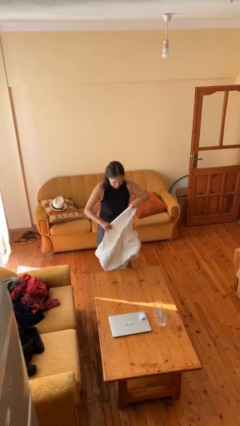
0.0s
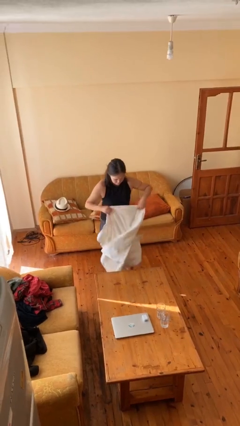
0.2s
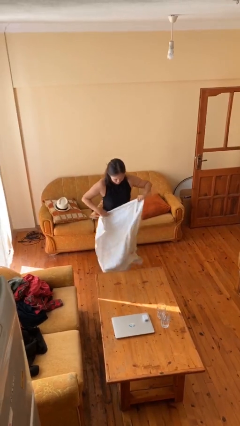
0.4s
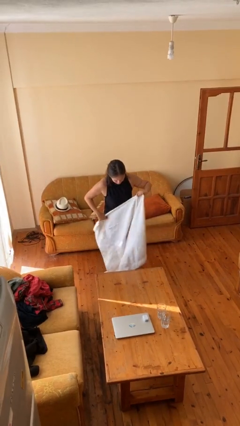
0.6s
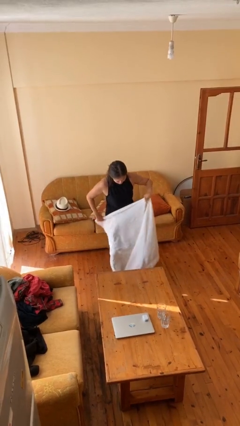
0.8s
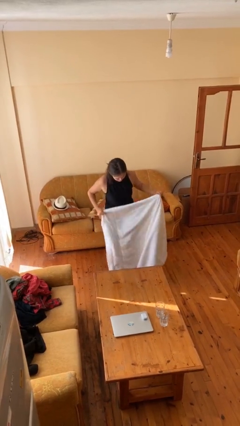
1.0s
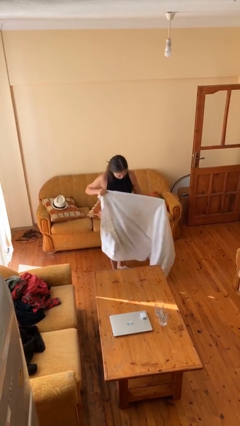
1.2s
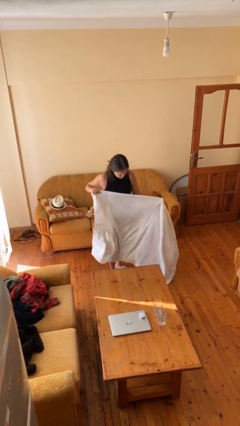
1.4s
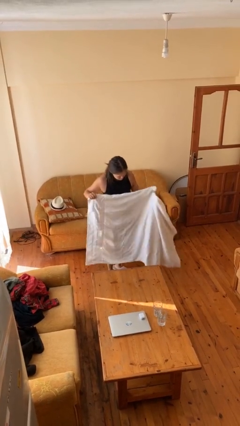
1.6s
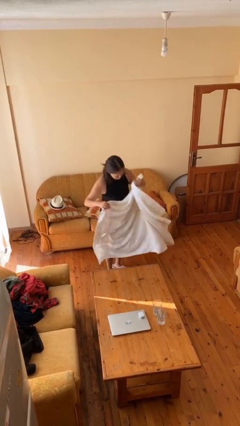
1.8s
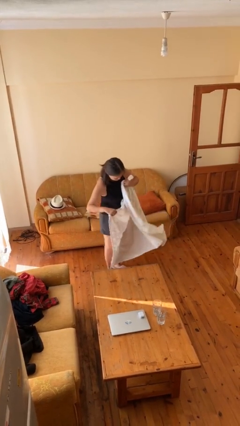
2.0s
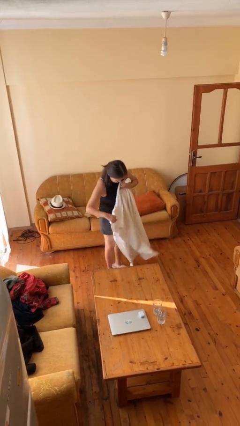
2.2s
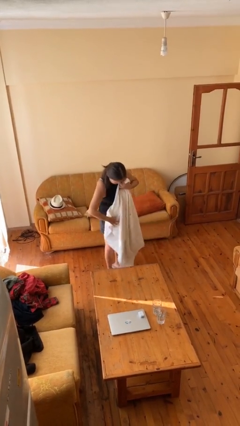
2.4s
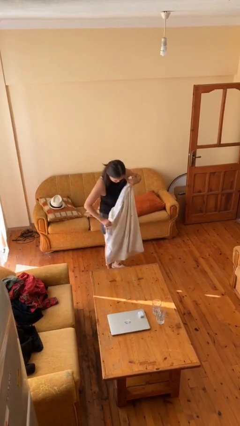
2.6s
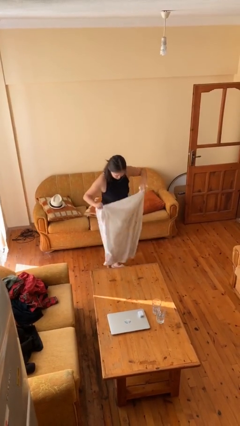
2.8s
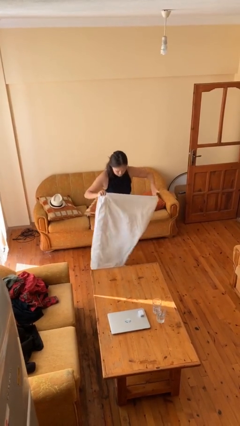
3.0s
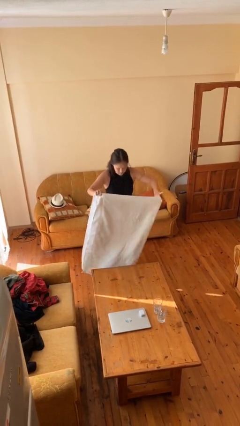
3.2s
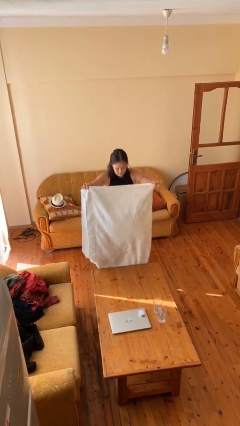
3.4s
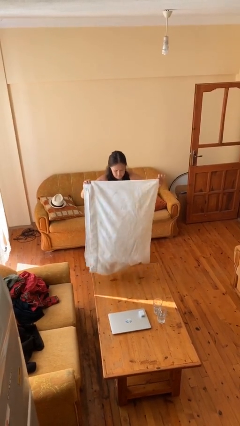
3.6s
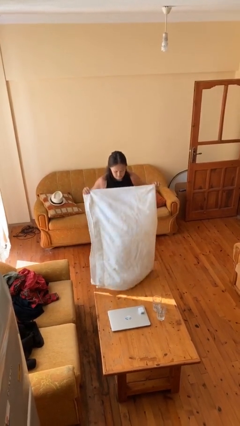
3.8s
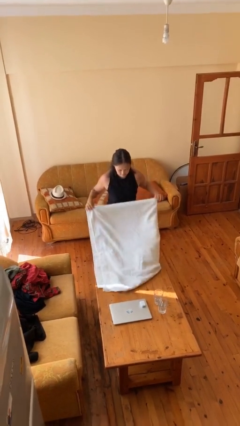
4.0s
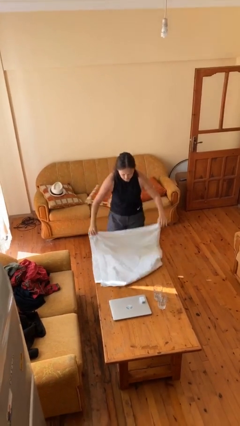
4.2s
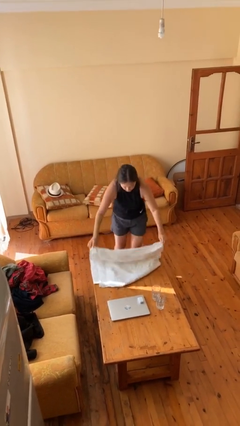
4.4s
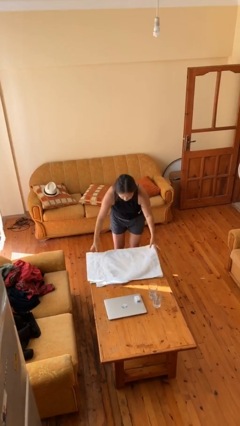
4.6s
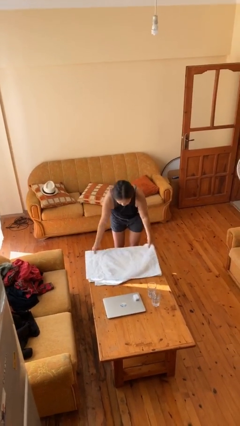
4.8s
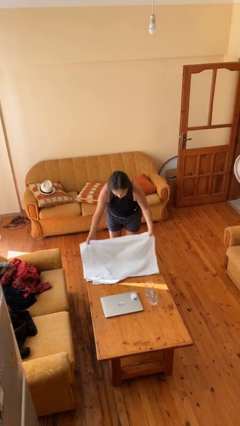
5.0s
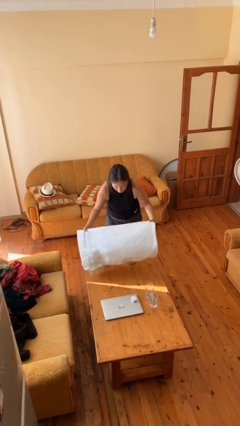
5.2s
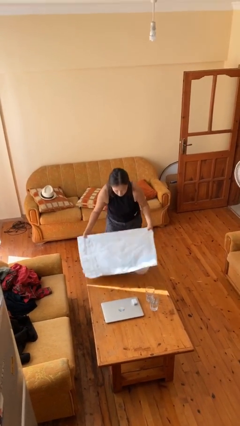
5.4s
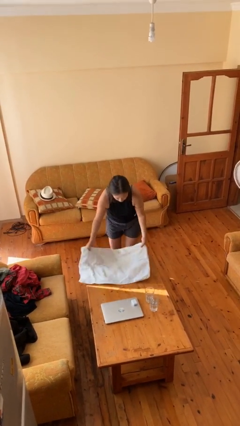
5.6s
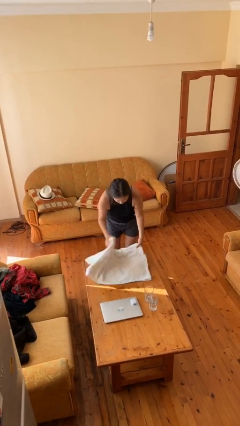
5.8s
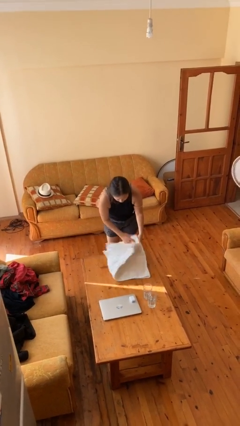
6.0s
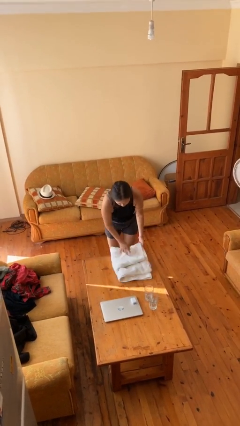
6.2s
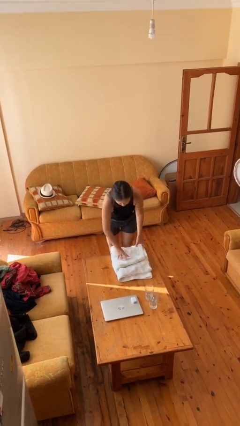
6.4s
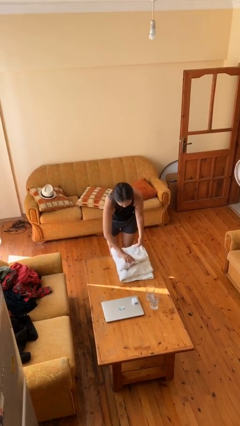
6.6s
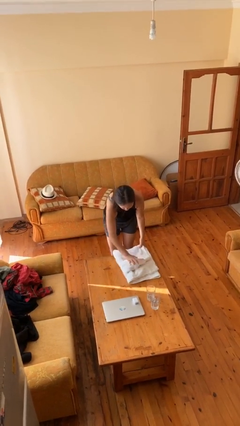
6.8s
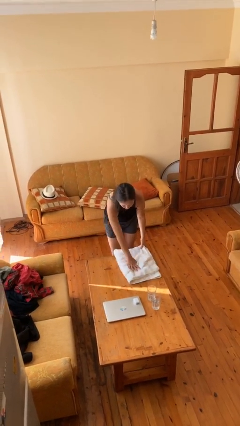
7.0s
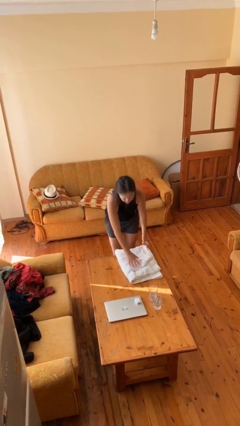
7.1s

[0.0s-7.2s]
person folds towel

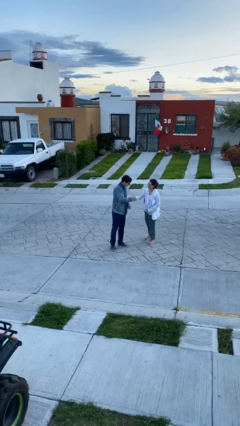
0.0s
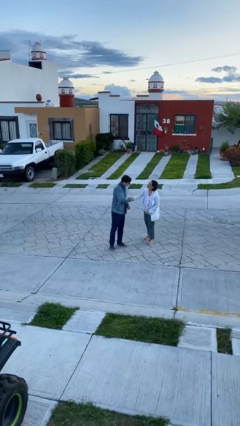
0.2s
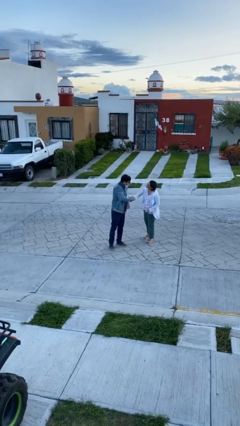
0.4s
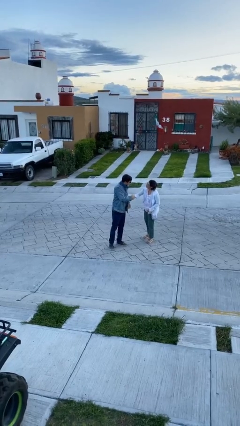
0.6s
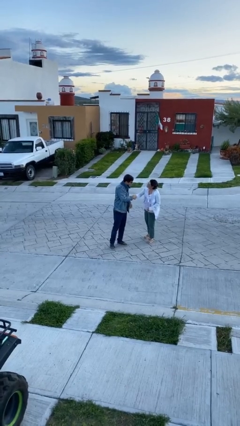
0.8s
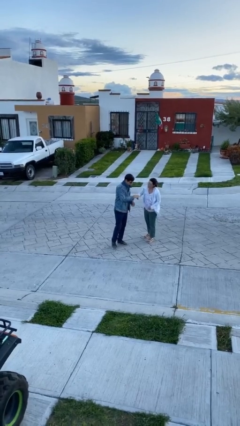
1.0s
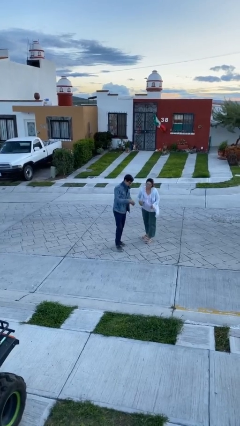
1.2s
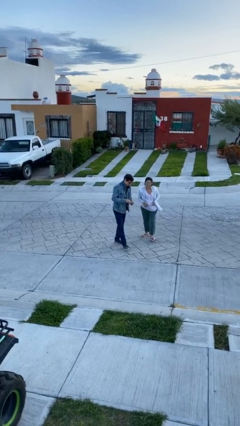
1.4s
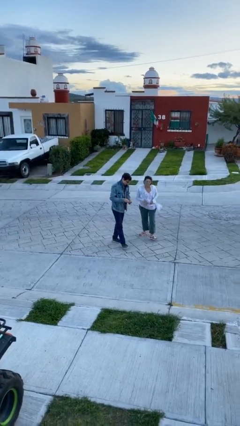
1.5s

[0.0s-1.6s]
person shakes hand

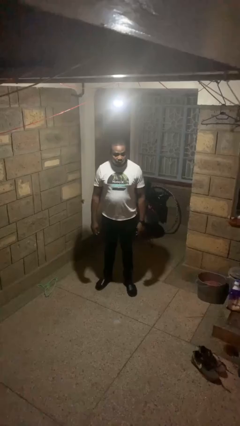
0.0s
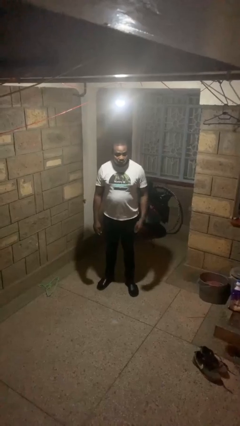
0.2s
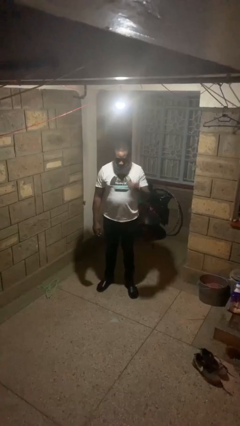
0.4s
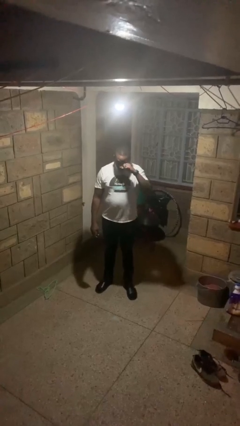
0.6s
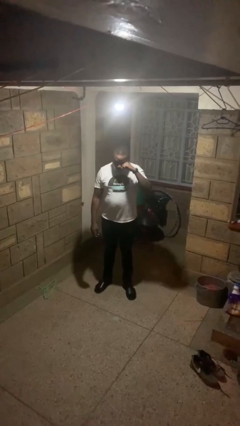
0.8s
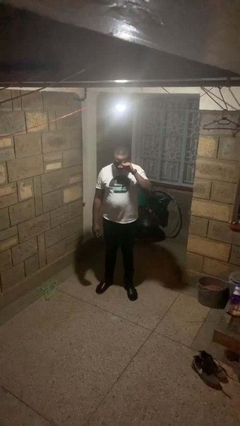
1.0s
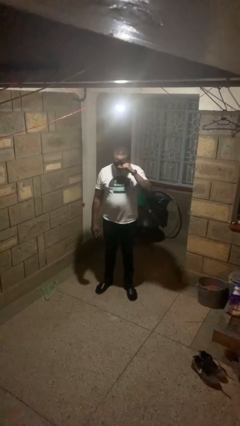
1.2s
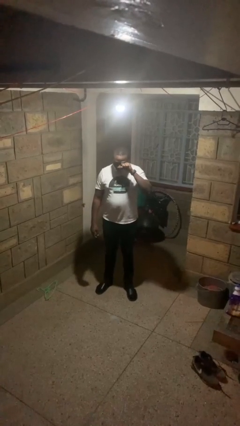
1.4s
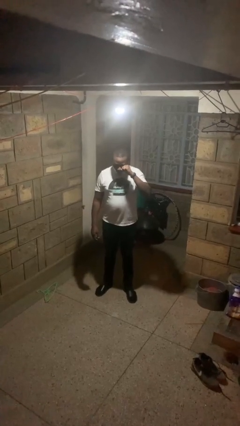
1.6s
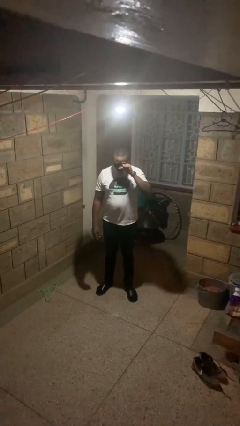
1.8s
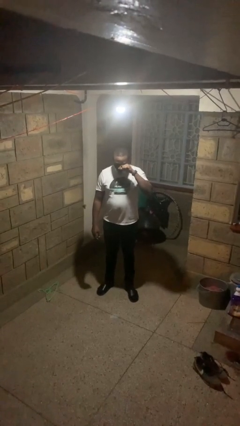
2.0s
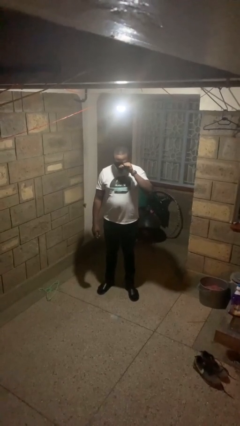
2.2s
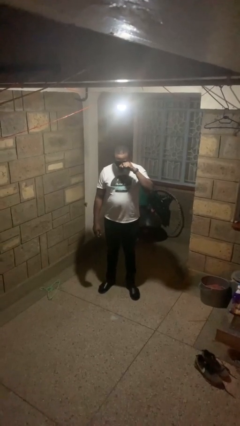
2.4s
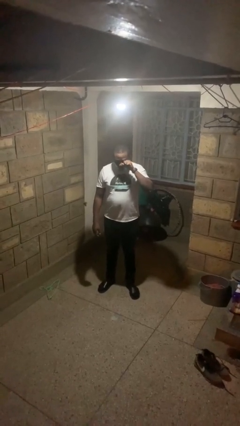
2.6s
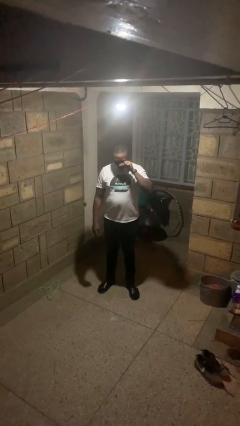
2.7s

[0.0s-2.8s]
person rubs eyes

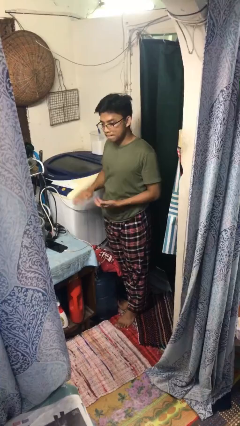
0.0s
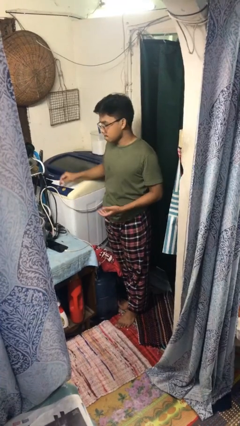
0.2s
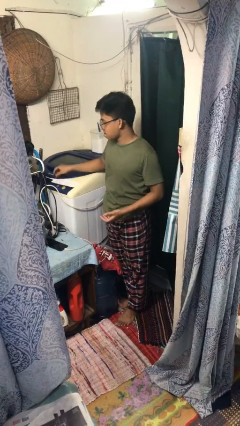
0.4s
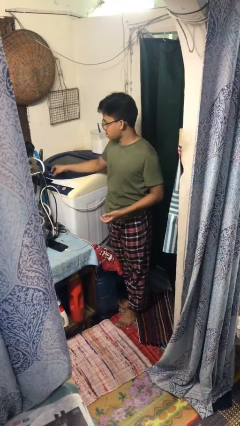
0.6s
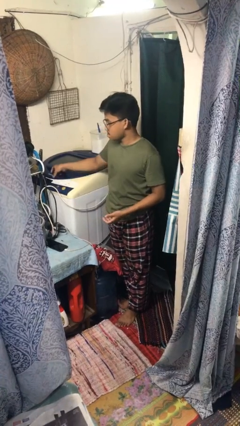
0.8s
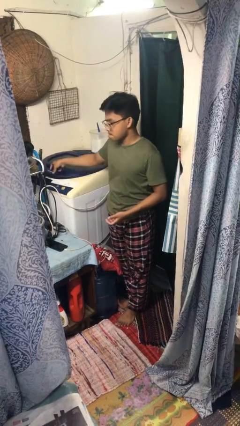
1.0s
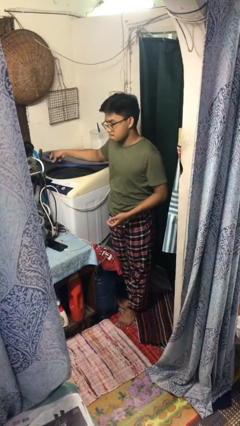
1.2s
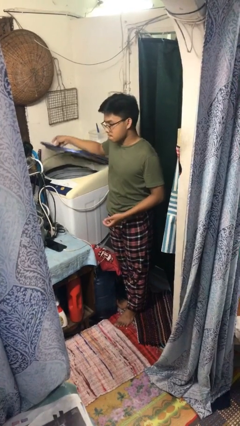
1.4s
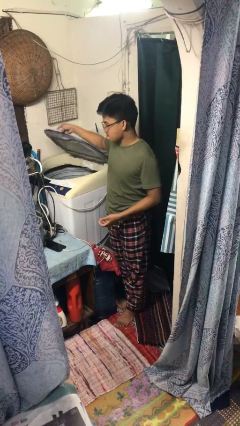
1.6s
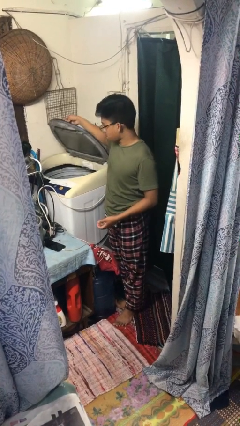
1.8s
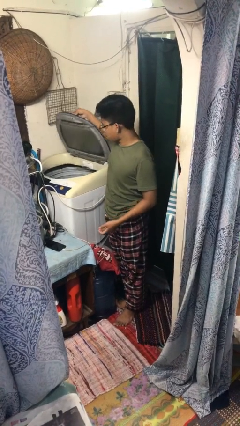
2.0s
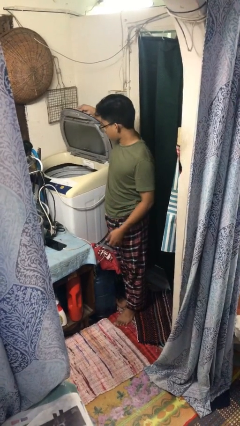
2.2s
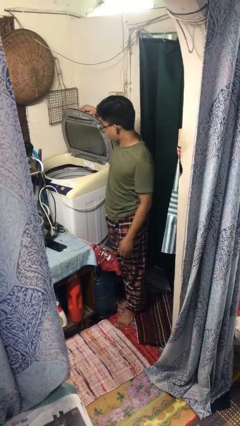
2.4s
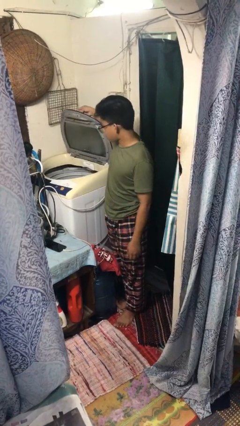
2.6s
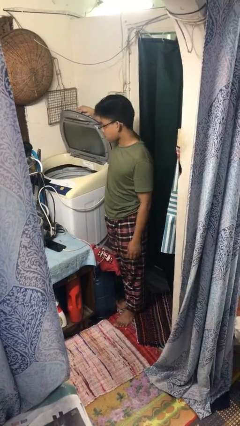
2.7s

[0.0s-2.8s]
person opens clothes washer

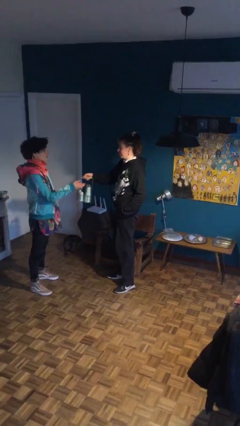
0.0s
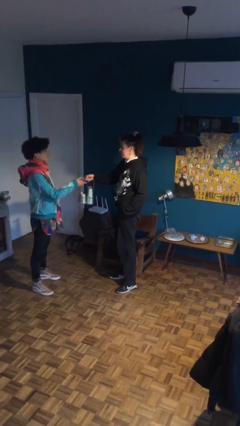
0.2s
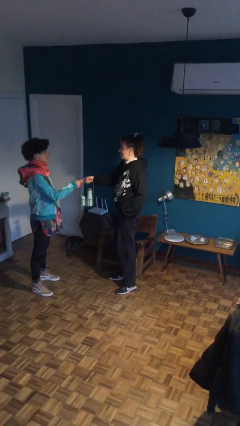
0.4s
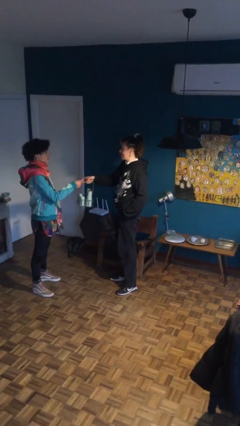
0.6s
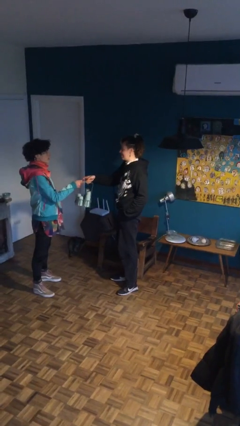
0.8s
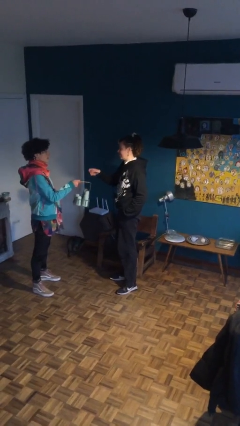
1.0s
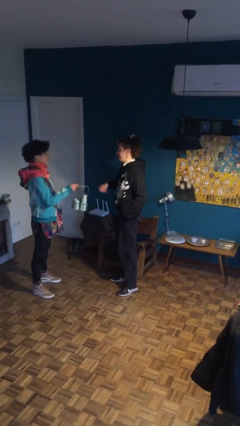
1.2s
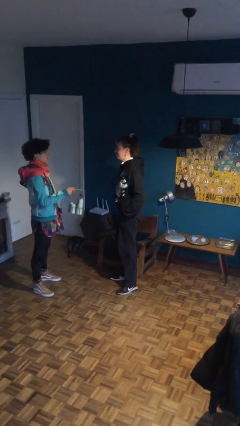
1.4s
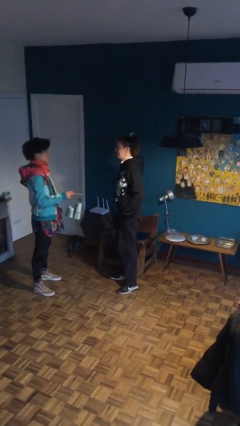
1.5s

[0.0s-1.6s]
person transfers object to person

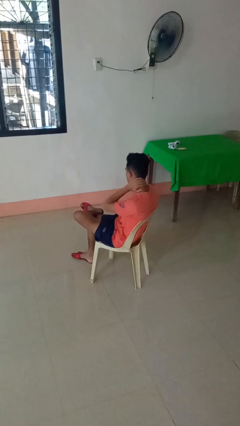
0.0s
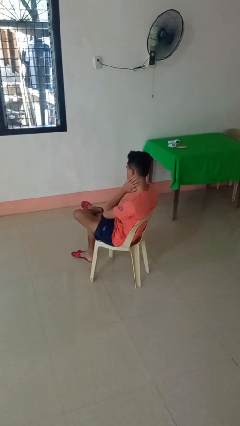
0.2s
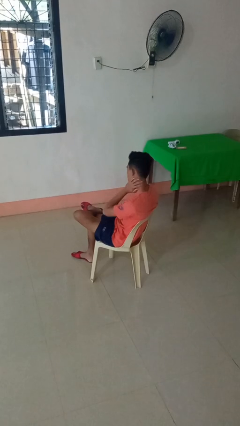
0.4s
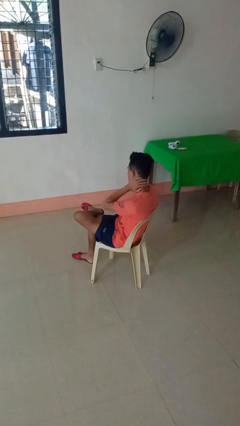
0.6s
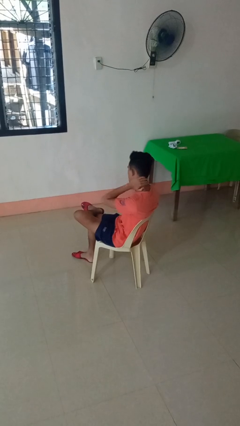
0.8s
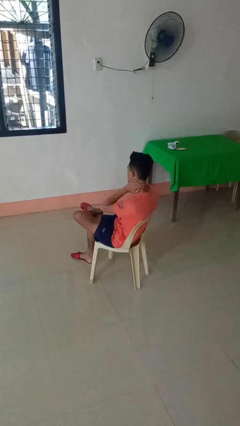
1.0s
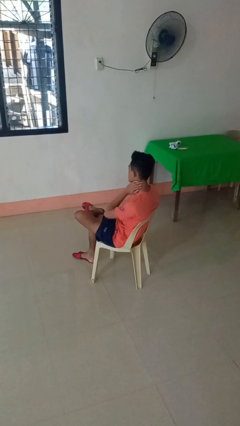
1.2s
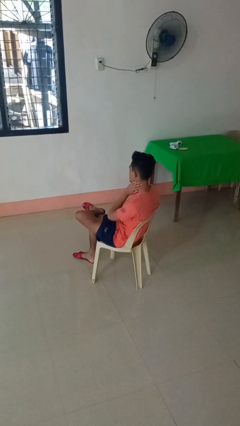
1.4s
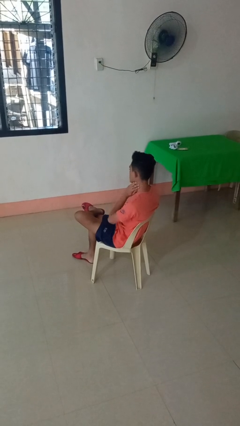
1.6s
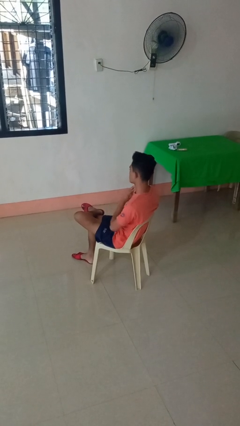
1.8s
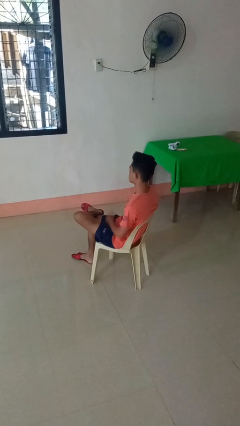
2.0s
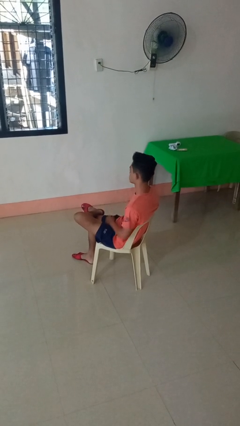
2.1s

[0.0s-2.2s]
person rubs neck
